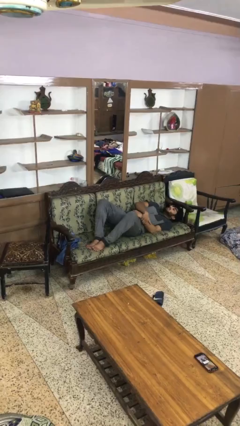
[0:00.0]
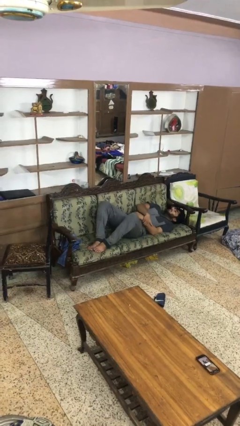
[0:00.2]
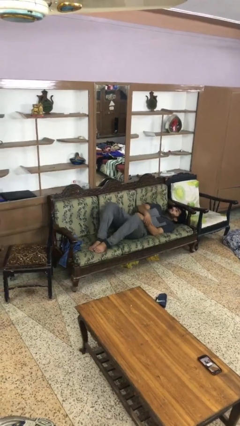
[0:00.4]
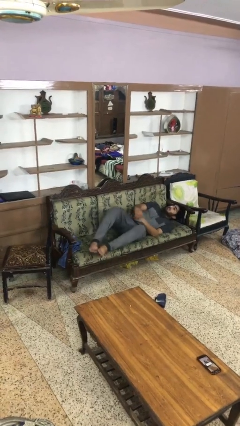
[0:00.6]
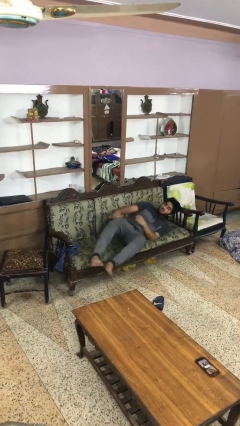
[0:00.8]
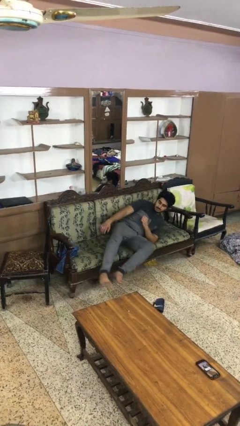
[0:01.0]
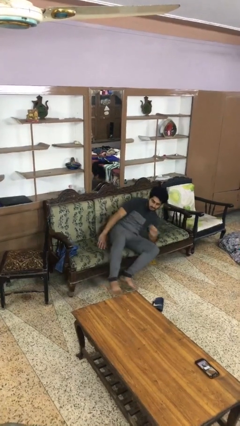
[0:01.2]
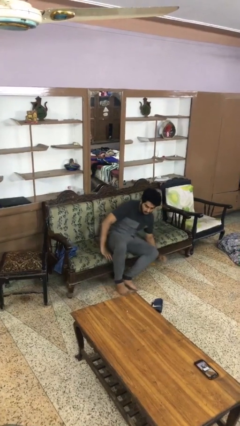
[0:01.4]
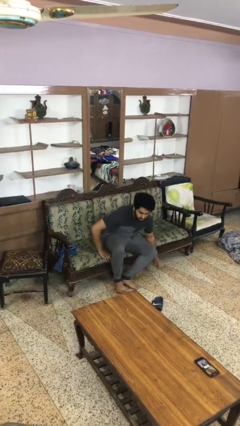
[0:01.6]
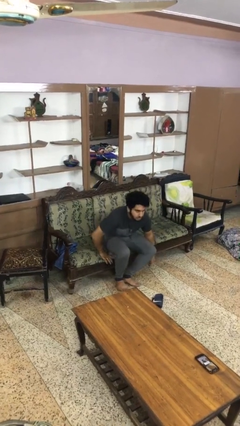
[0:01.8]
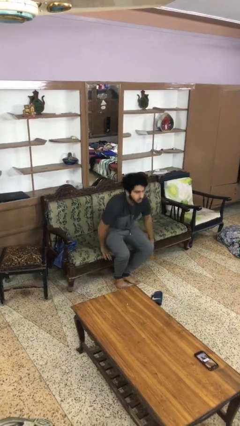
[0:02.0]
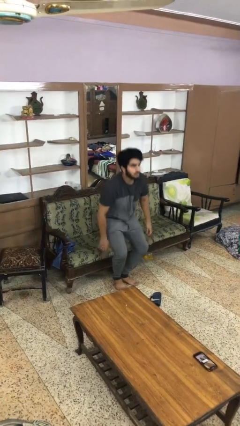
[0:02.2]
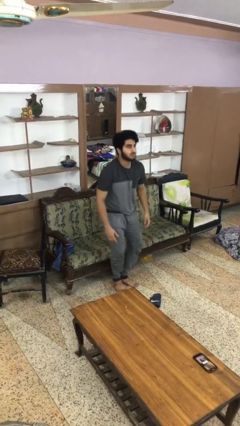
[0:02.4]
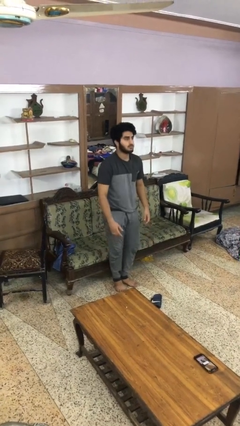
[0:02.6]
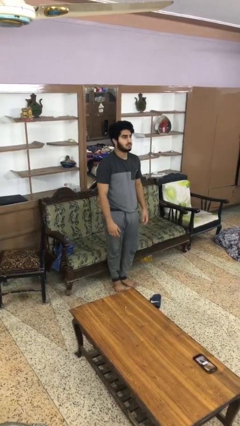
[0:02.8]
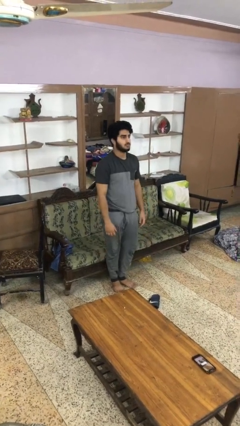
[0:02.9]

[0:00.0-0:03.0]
person stands up

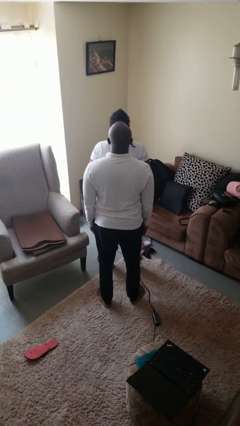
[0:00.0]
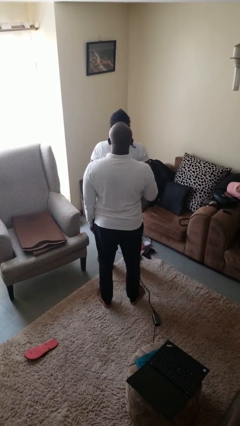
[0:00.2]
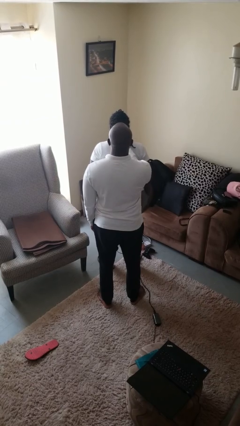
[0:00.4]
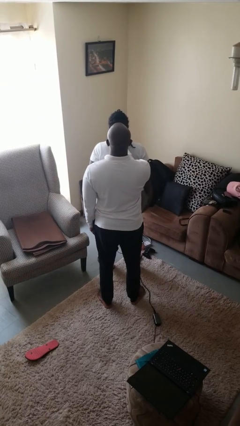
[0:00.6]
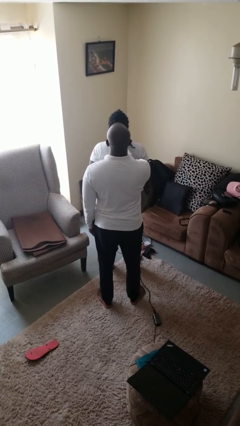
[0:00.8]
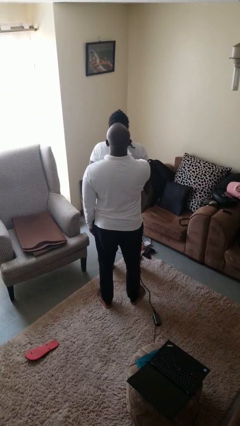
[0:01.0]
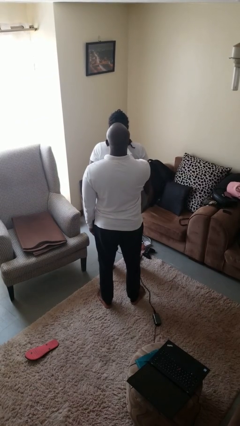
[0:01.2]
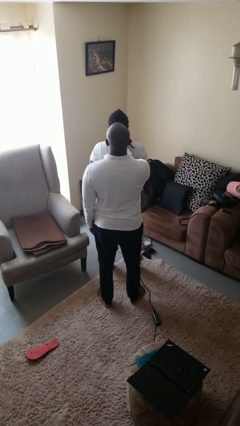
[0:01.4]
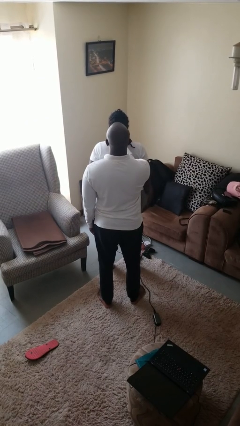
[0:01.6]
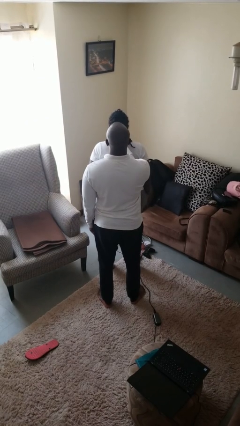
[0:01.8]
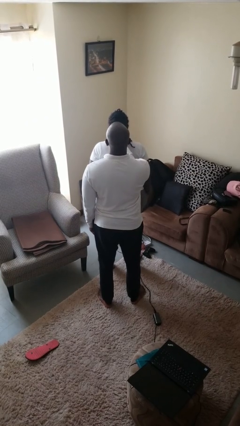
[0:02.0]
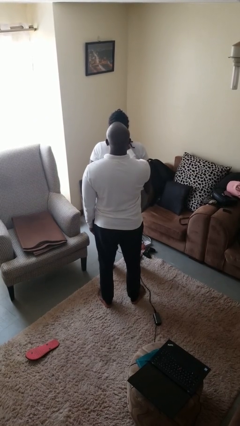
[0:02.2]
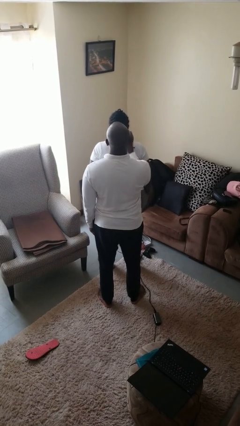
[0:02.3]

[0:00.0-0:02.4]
person grabs person by hair

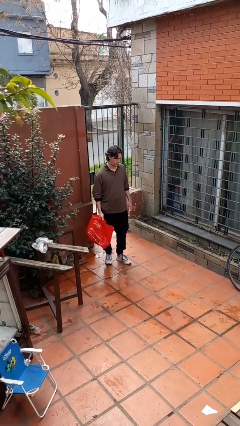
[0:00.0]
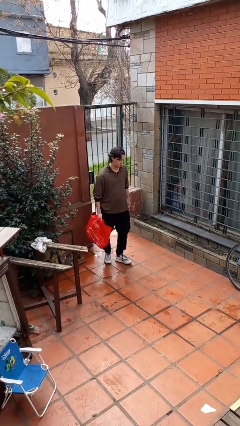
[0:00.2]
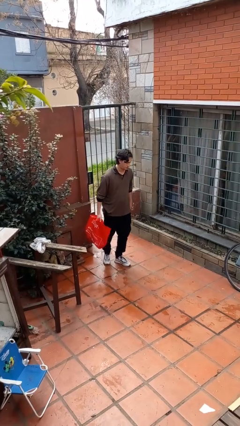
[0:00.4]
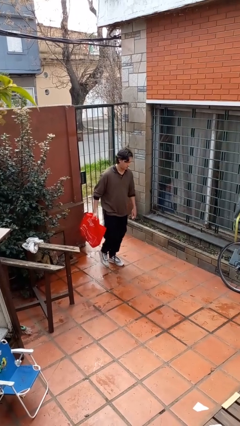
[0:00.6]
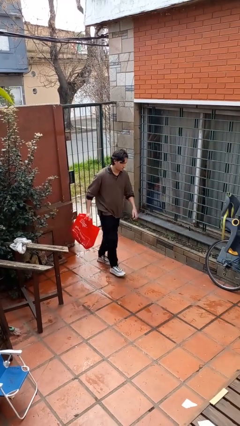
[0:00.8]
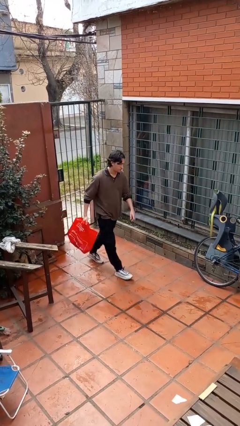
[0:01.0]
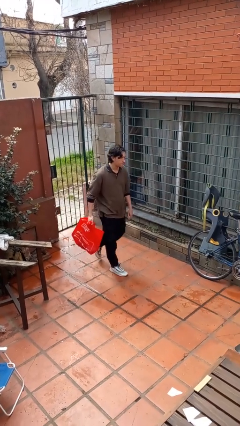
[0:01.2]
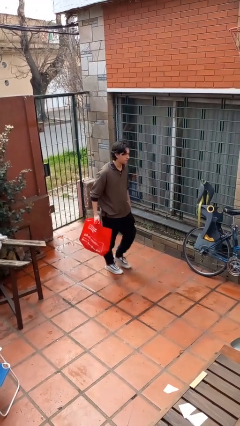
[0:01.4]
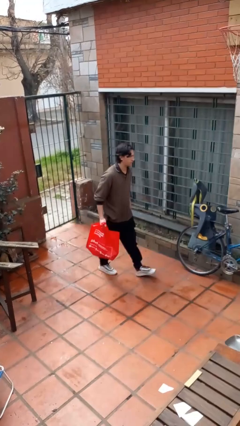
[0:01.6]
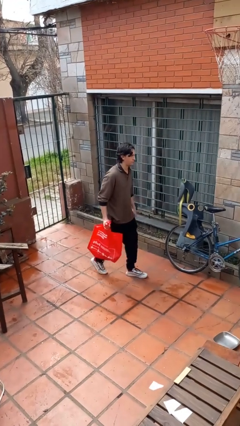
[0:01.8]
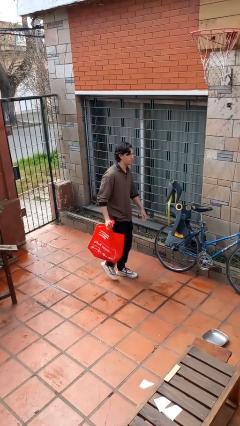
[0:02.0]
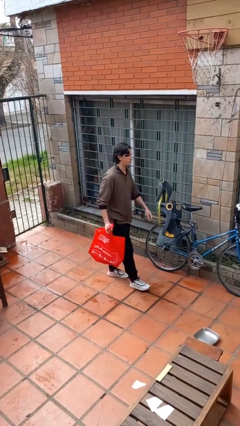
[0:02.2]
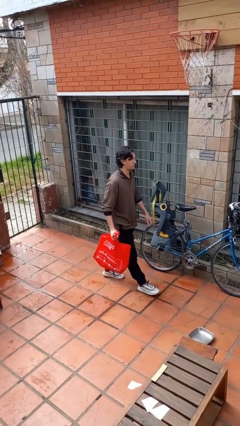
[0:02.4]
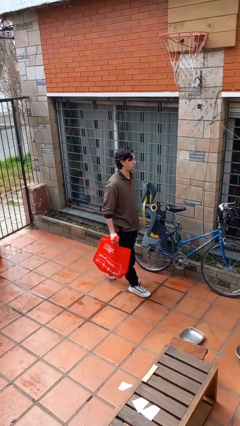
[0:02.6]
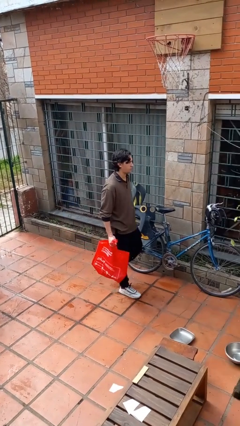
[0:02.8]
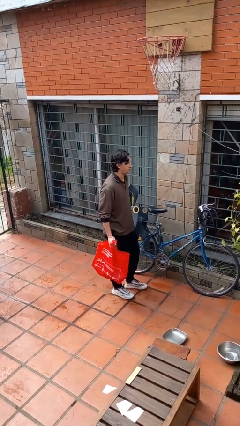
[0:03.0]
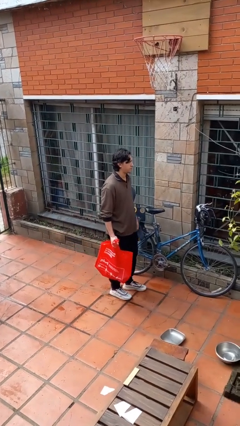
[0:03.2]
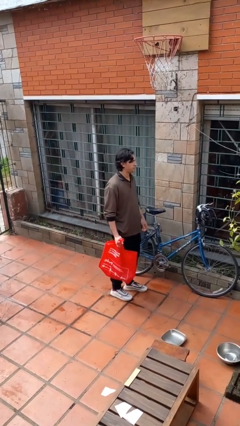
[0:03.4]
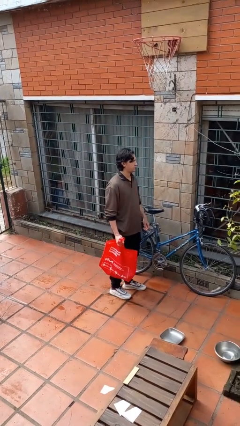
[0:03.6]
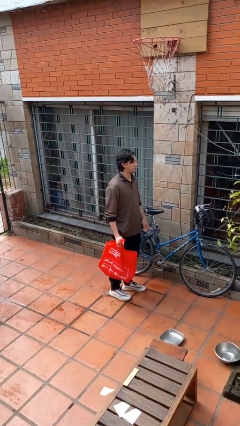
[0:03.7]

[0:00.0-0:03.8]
person carries groceries

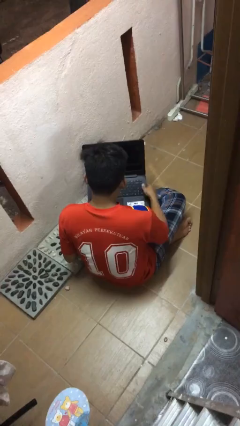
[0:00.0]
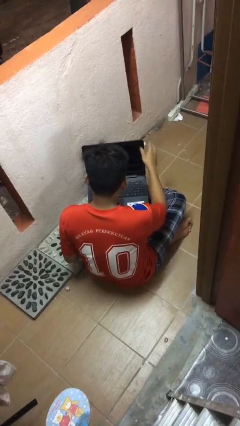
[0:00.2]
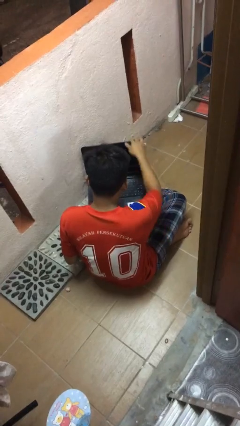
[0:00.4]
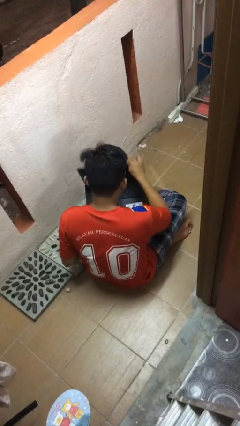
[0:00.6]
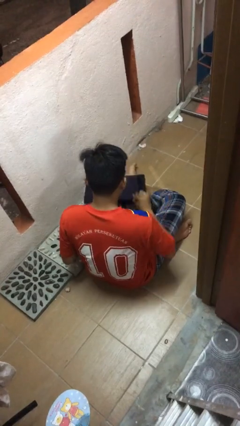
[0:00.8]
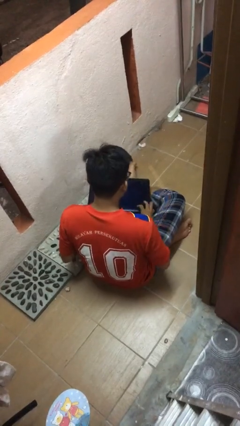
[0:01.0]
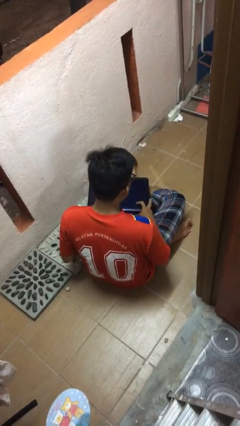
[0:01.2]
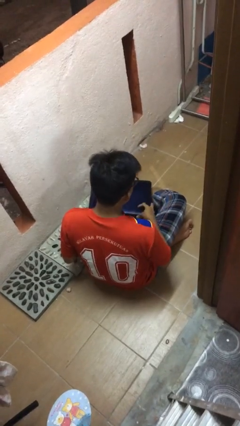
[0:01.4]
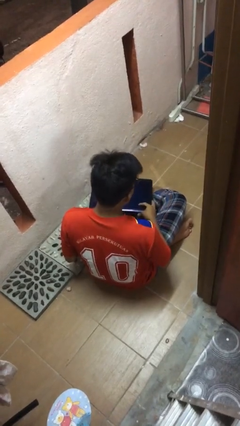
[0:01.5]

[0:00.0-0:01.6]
person closes laptop

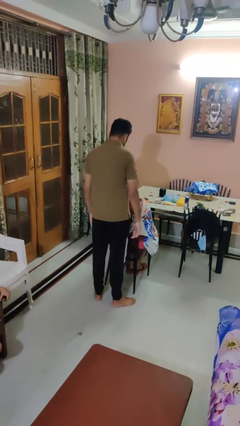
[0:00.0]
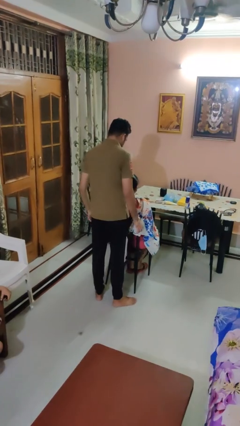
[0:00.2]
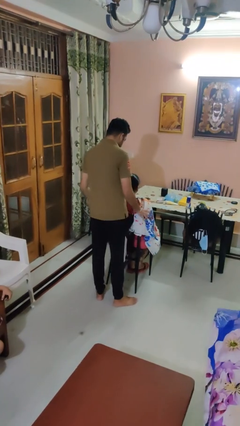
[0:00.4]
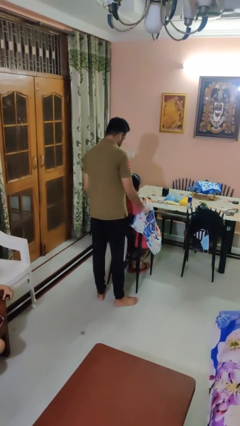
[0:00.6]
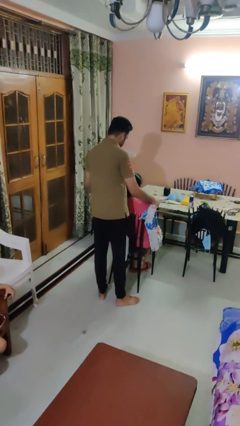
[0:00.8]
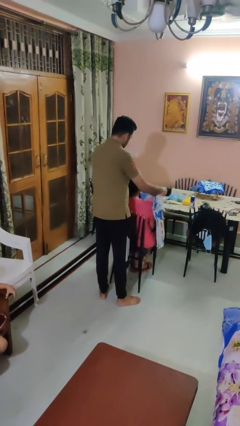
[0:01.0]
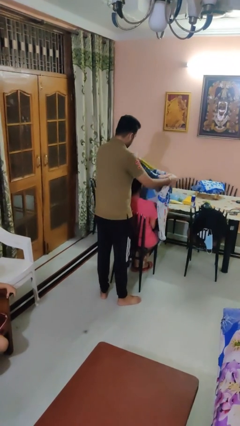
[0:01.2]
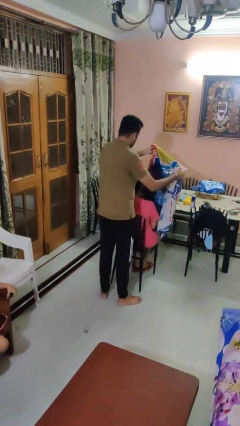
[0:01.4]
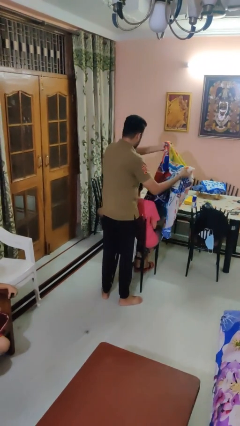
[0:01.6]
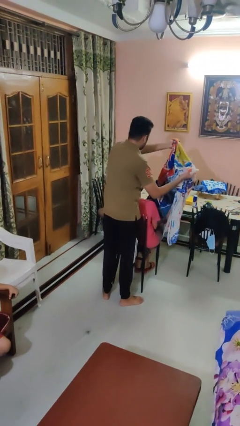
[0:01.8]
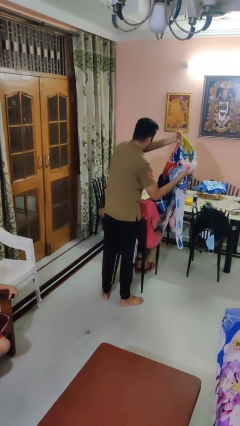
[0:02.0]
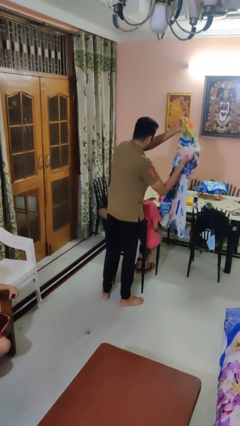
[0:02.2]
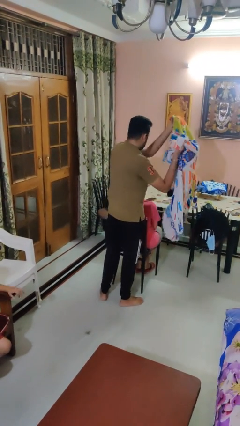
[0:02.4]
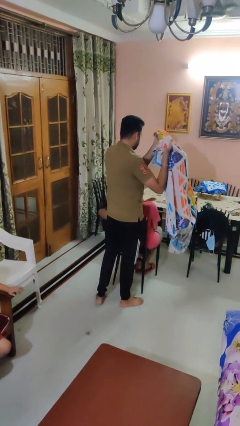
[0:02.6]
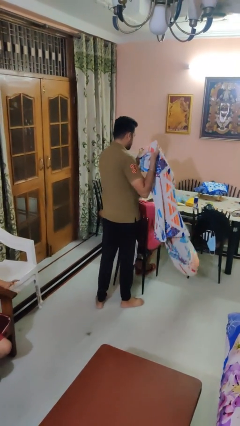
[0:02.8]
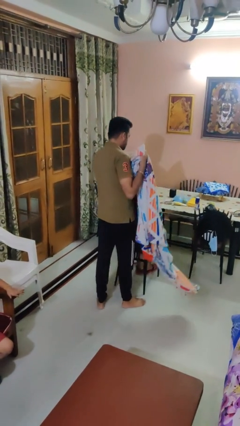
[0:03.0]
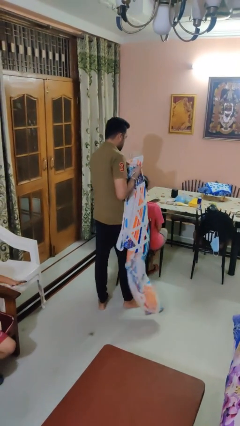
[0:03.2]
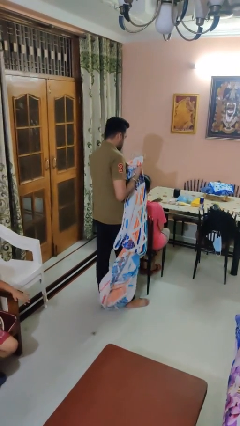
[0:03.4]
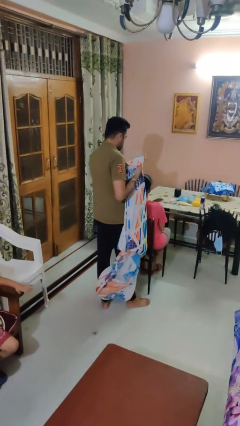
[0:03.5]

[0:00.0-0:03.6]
person uncovers friend with blanket

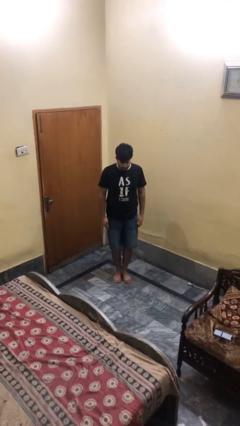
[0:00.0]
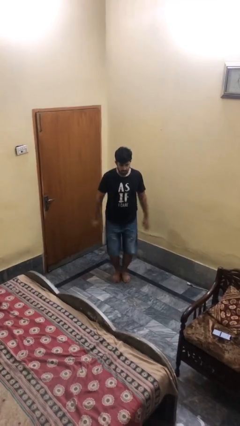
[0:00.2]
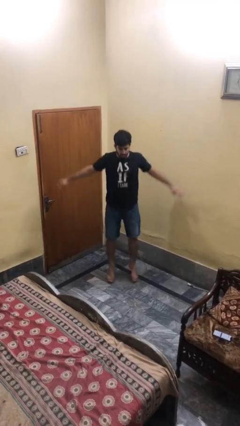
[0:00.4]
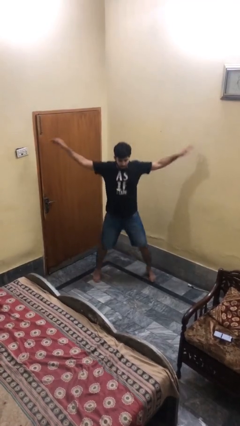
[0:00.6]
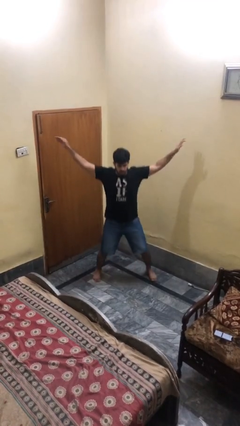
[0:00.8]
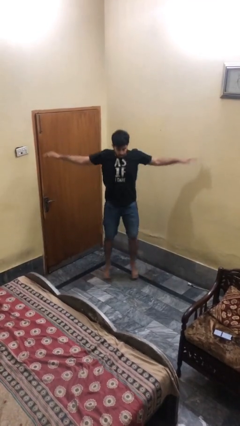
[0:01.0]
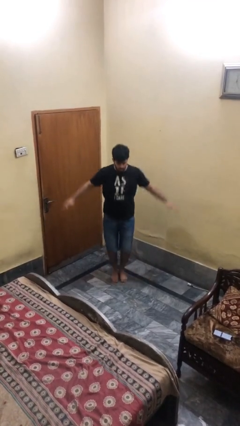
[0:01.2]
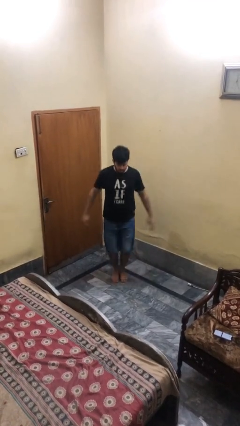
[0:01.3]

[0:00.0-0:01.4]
person exercises with jumping jacks

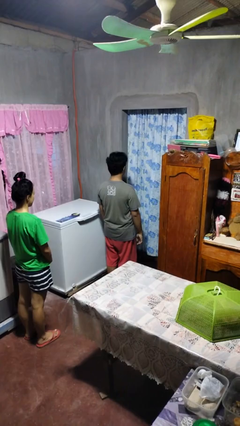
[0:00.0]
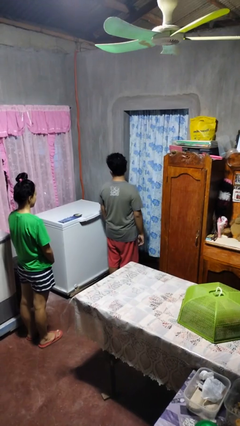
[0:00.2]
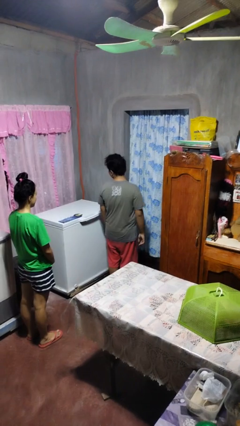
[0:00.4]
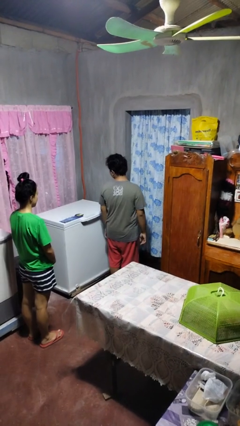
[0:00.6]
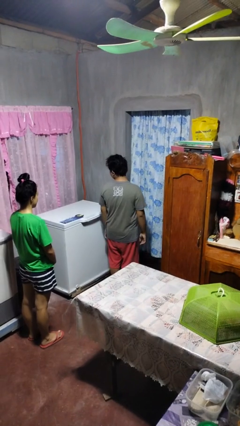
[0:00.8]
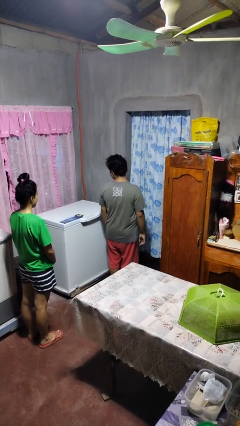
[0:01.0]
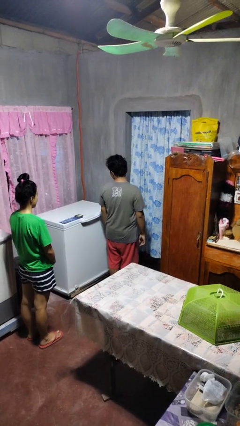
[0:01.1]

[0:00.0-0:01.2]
person looks over shoulder

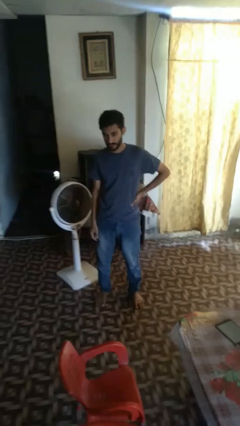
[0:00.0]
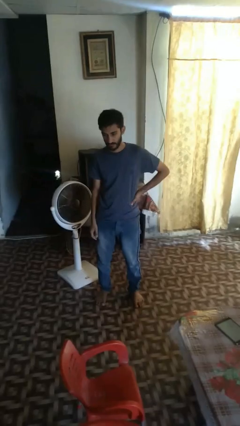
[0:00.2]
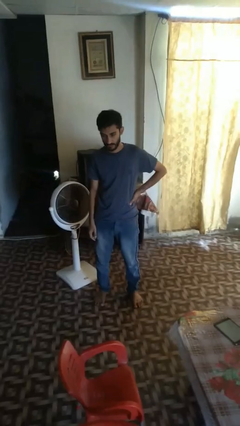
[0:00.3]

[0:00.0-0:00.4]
person gestures number one
